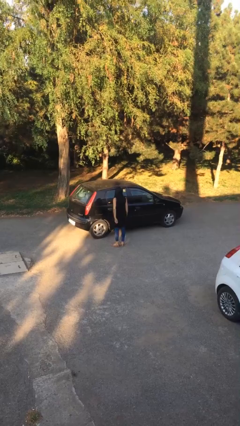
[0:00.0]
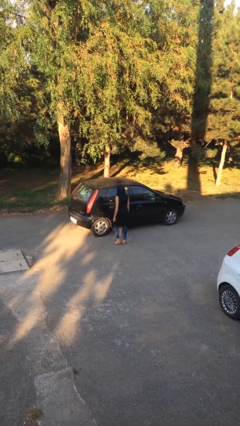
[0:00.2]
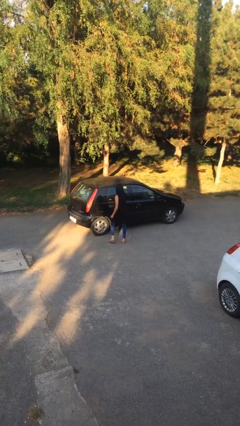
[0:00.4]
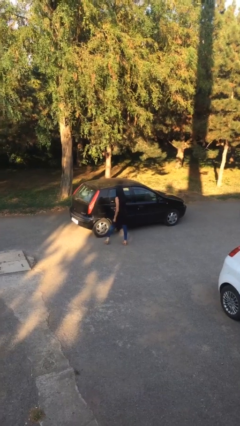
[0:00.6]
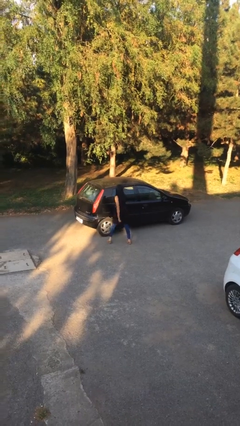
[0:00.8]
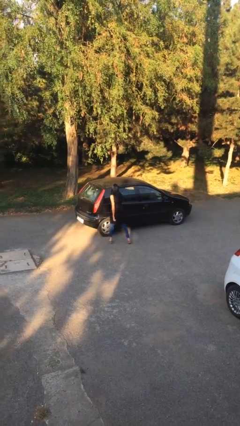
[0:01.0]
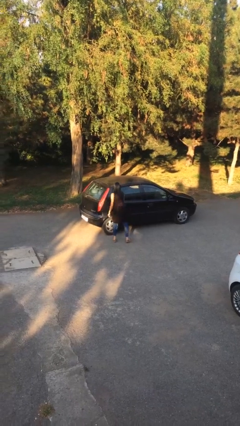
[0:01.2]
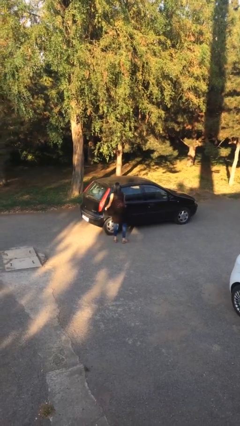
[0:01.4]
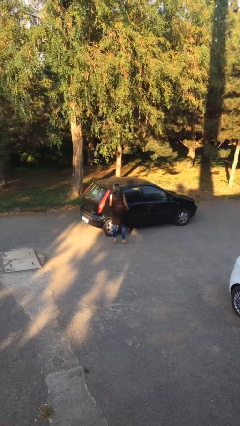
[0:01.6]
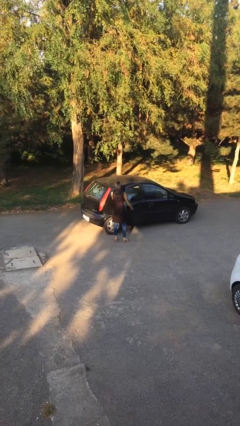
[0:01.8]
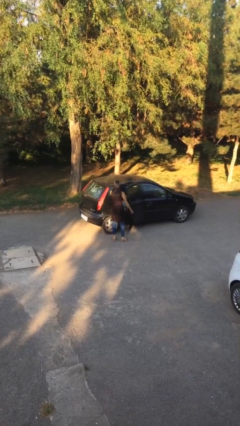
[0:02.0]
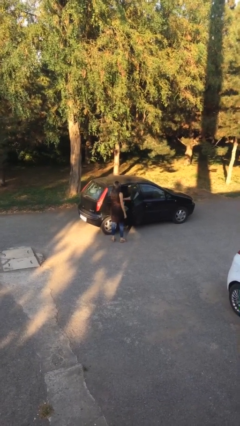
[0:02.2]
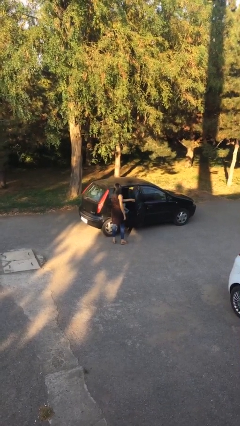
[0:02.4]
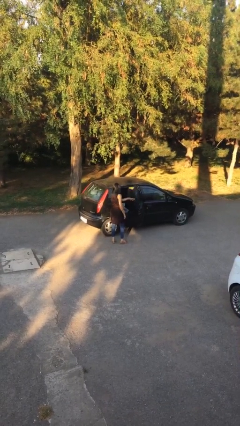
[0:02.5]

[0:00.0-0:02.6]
person opens car door

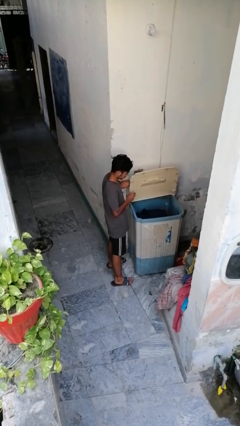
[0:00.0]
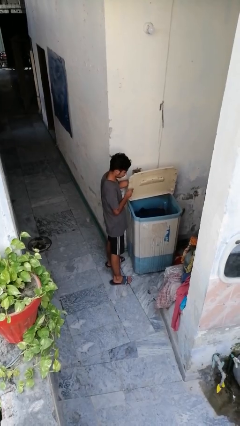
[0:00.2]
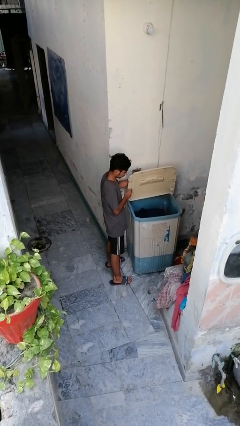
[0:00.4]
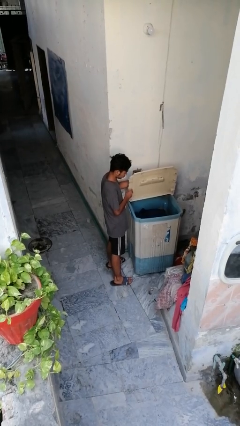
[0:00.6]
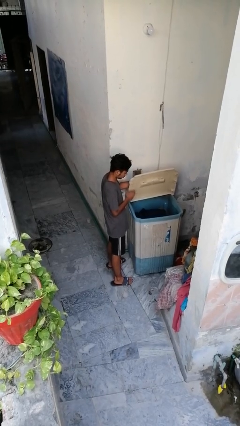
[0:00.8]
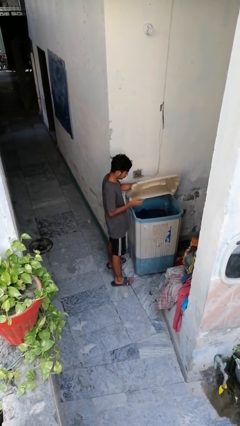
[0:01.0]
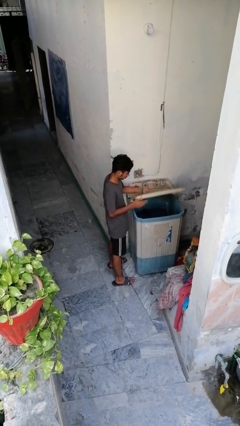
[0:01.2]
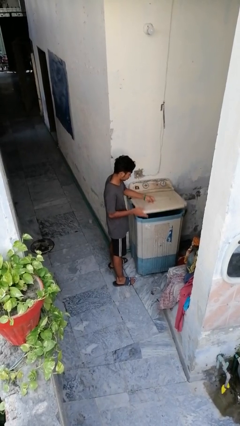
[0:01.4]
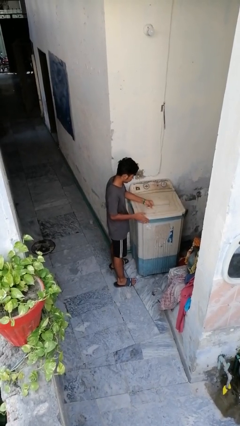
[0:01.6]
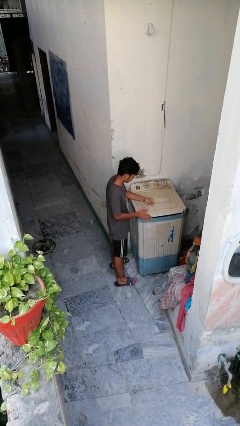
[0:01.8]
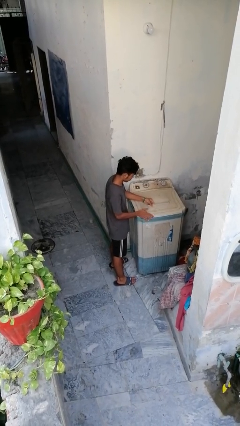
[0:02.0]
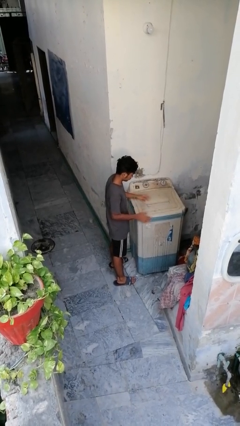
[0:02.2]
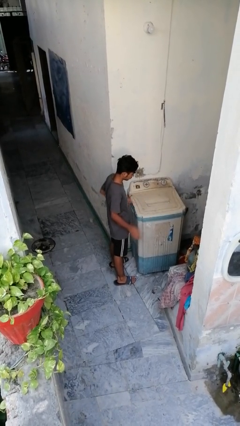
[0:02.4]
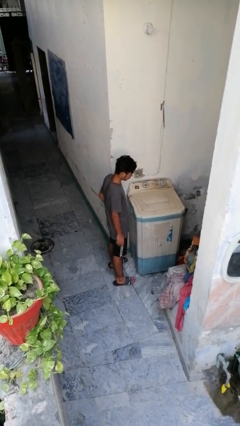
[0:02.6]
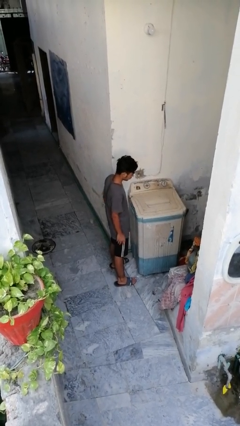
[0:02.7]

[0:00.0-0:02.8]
person closes clothes washer

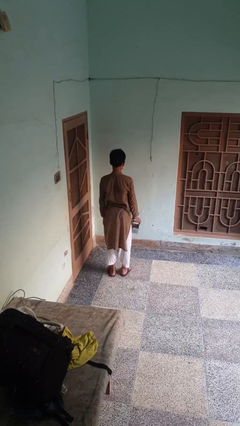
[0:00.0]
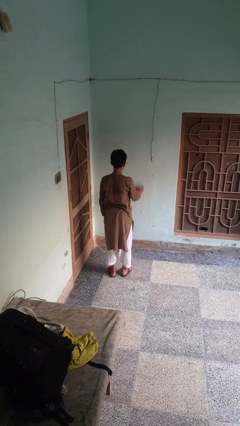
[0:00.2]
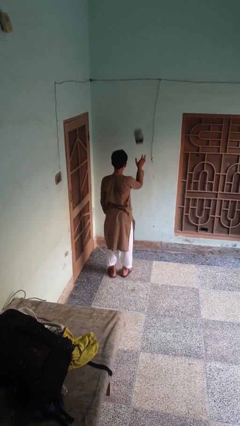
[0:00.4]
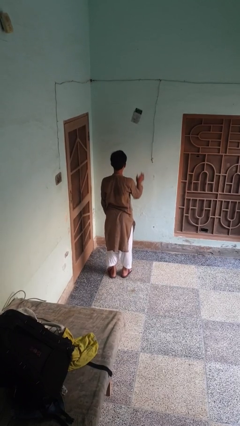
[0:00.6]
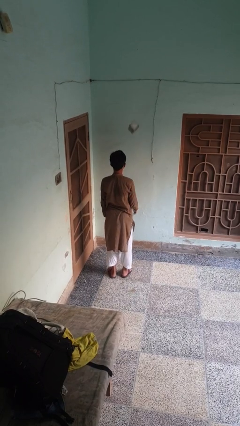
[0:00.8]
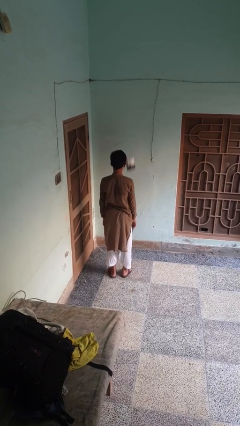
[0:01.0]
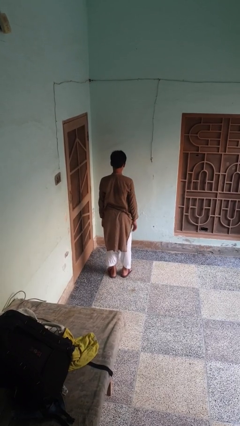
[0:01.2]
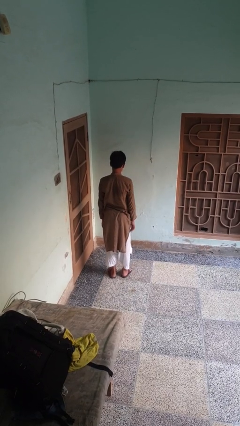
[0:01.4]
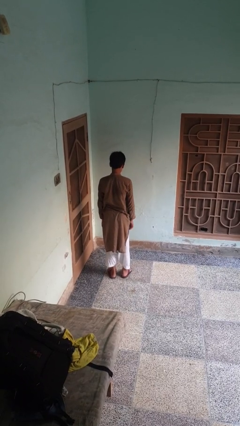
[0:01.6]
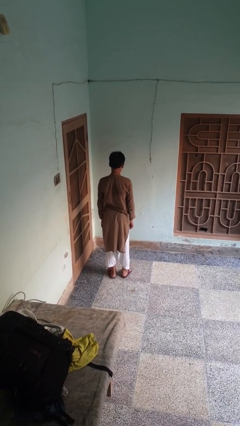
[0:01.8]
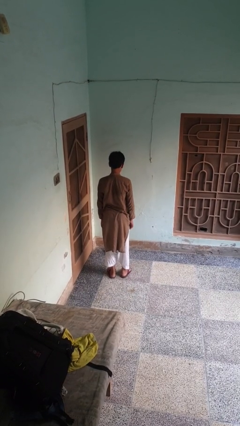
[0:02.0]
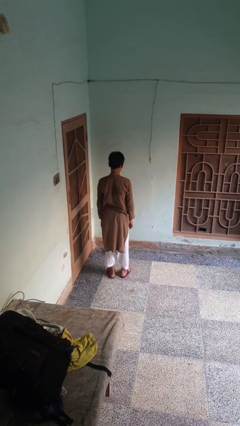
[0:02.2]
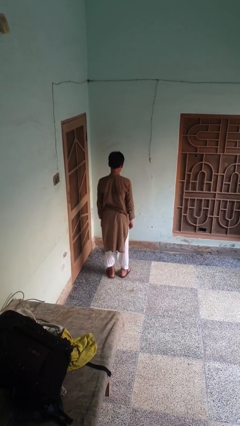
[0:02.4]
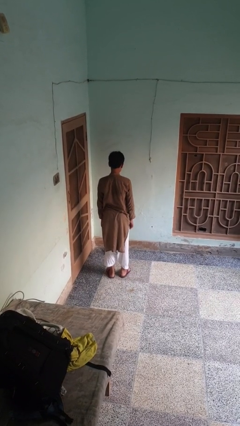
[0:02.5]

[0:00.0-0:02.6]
person throws object into air

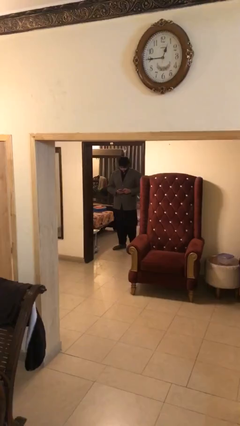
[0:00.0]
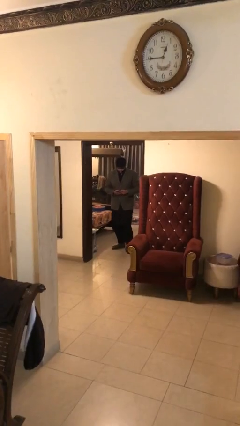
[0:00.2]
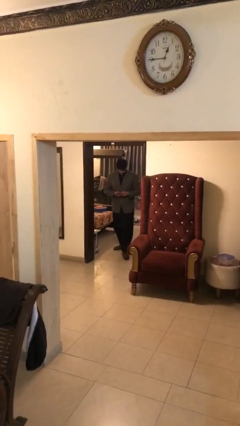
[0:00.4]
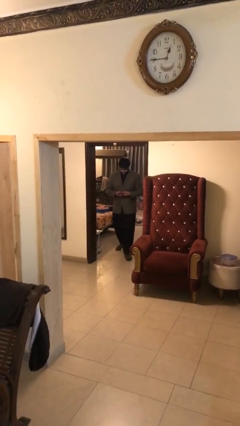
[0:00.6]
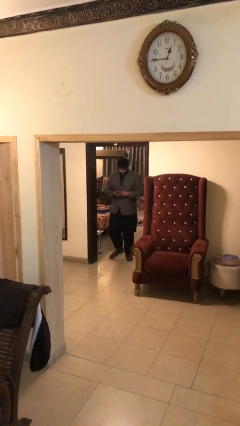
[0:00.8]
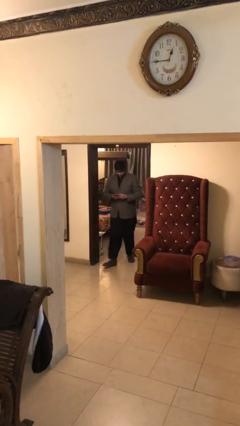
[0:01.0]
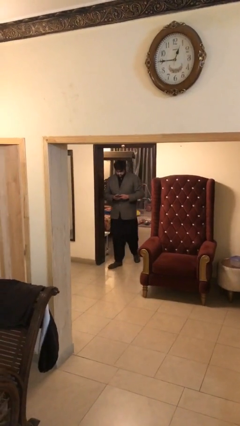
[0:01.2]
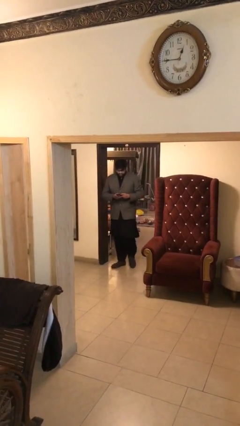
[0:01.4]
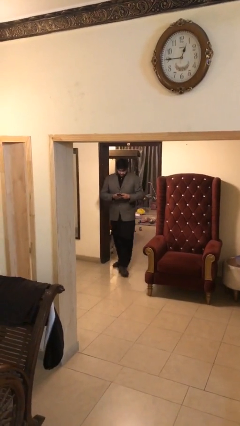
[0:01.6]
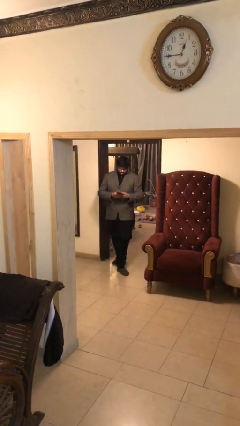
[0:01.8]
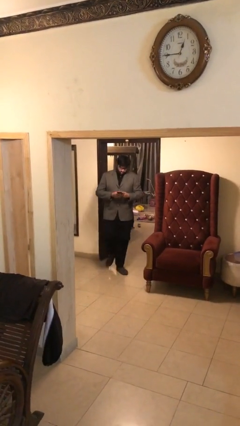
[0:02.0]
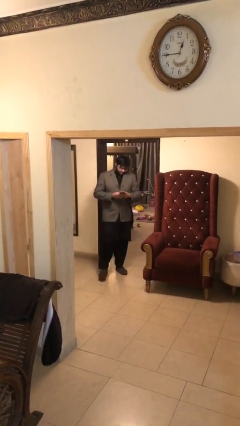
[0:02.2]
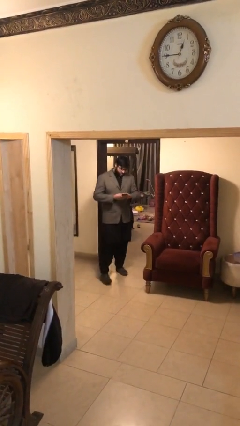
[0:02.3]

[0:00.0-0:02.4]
person enters scene through structure

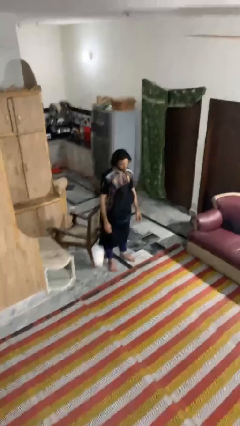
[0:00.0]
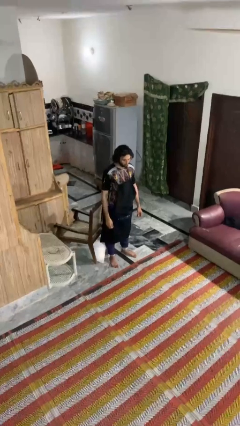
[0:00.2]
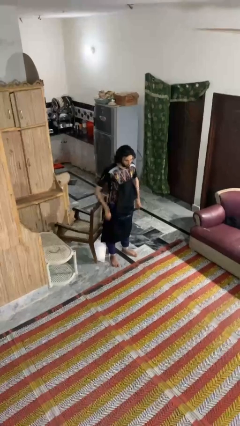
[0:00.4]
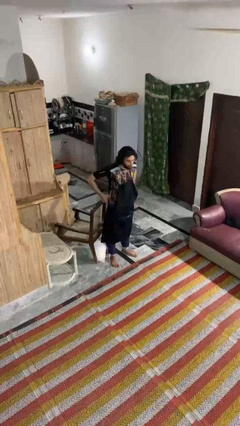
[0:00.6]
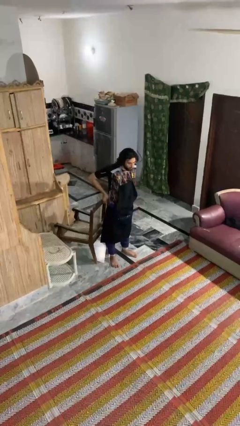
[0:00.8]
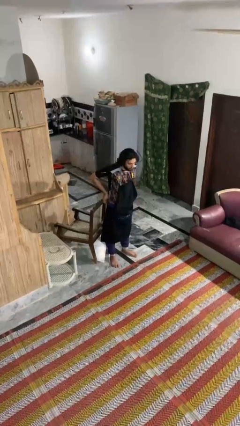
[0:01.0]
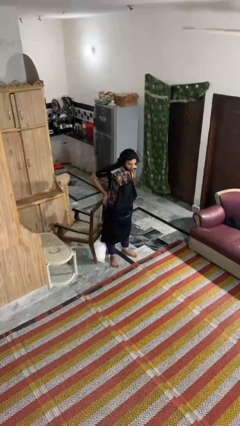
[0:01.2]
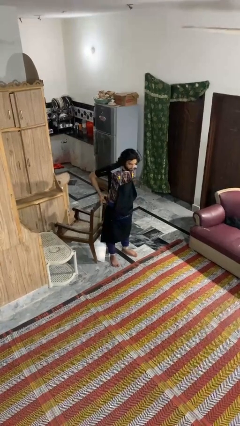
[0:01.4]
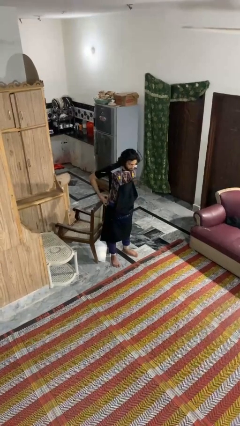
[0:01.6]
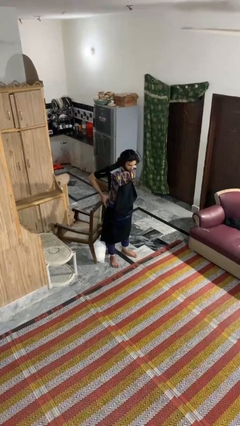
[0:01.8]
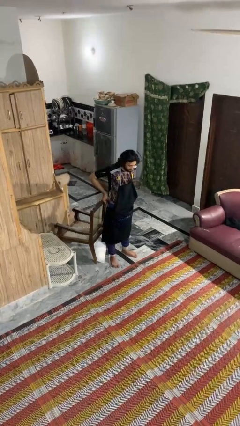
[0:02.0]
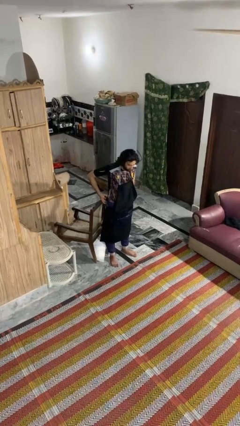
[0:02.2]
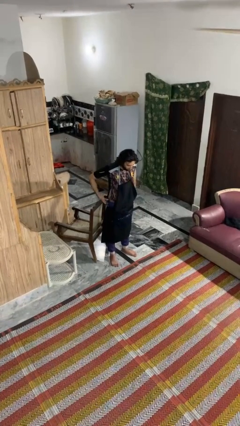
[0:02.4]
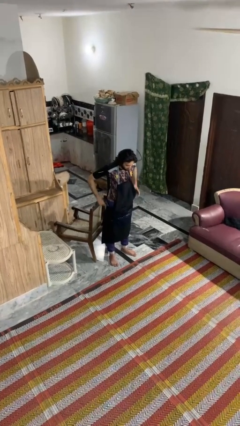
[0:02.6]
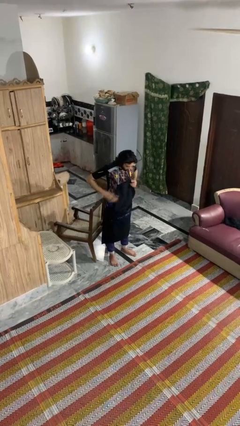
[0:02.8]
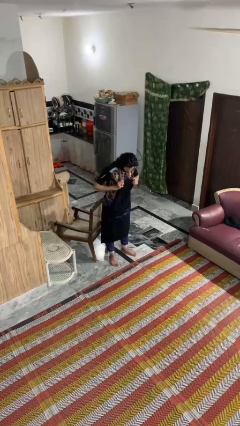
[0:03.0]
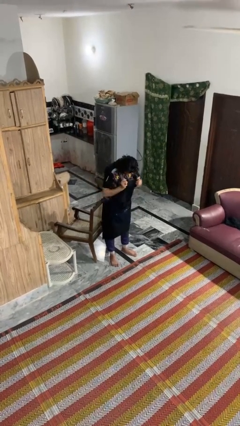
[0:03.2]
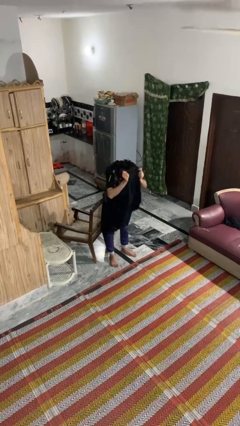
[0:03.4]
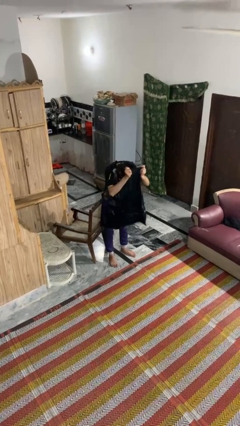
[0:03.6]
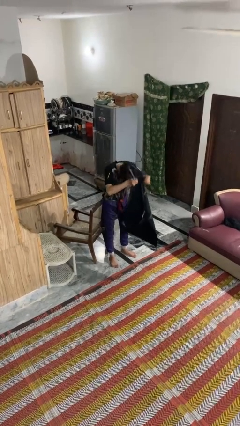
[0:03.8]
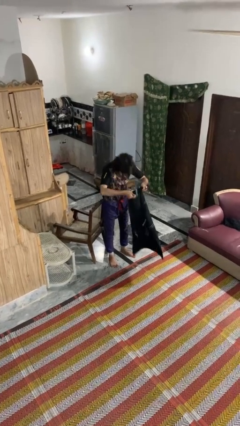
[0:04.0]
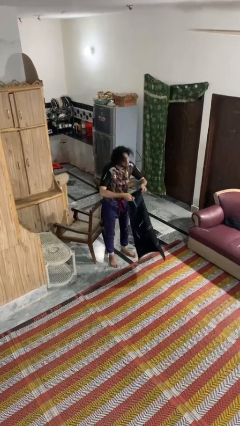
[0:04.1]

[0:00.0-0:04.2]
person takes off apron

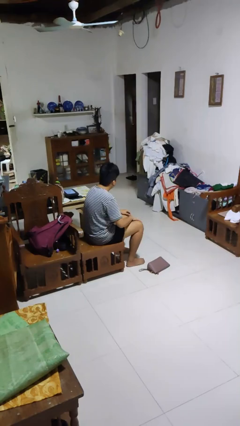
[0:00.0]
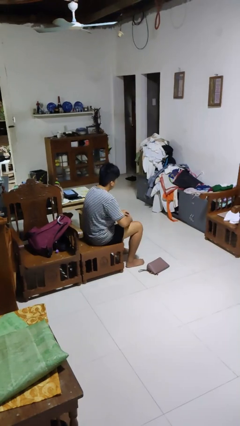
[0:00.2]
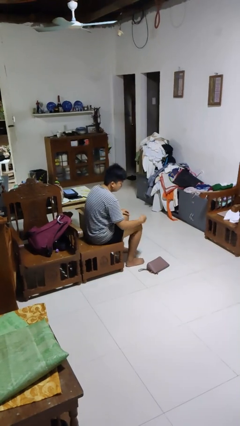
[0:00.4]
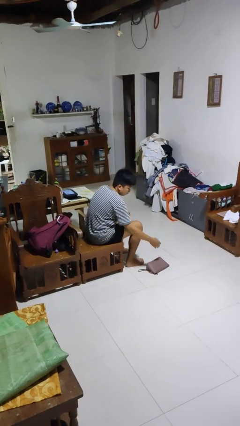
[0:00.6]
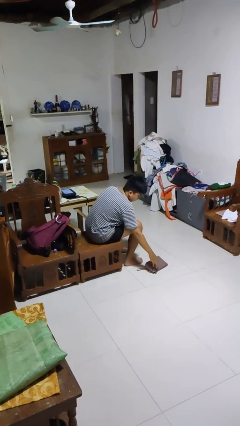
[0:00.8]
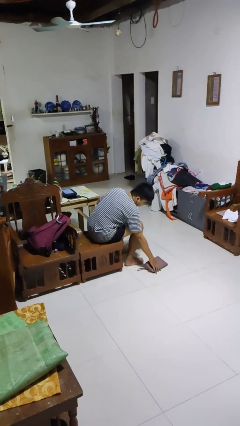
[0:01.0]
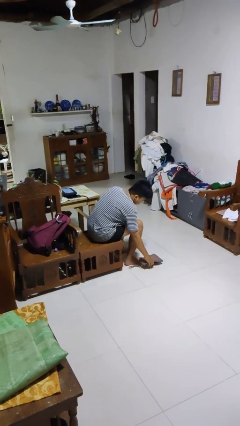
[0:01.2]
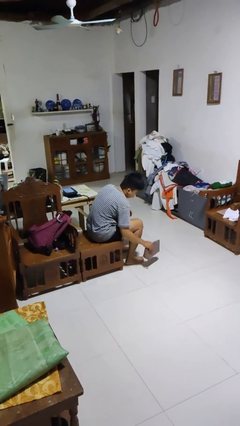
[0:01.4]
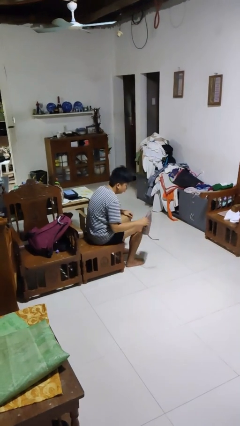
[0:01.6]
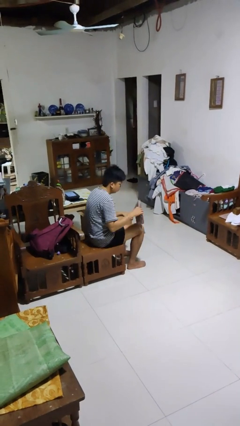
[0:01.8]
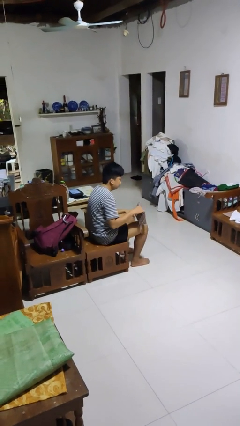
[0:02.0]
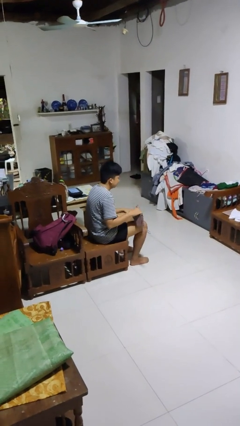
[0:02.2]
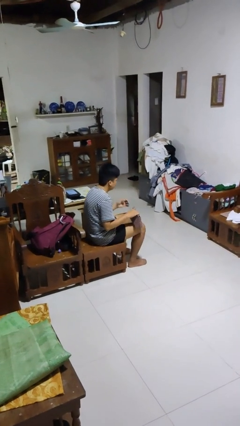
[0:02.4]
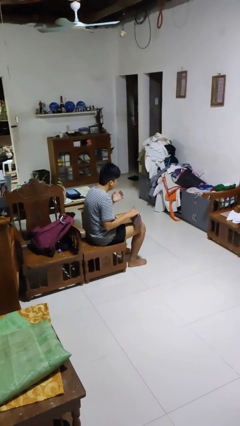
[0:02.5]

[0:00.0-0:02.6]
person picks up object from floor

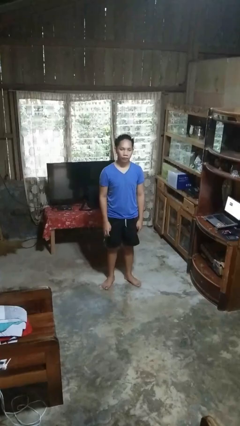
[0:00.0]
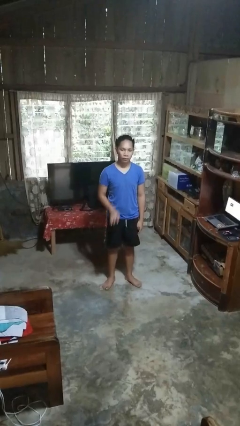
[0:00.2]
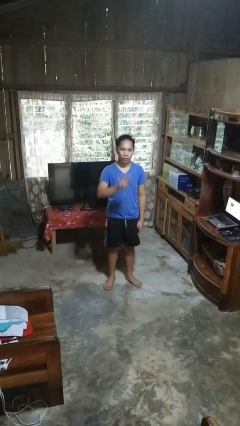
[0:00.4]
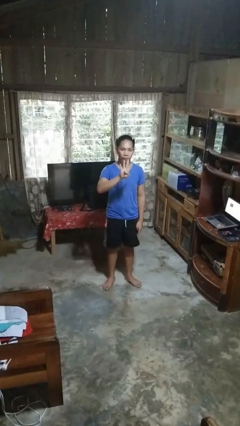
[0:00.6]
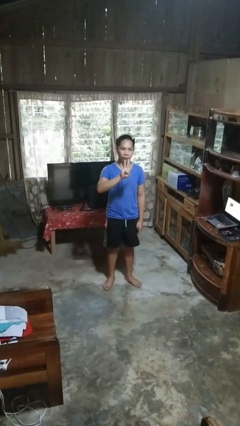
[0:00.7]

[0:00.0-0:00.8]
person gestures number four
